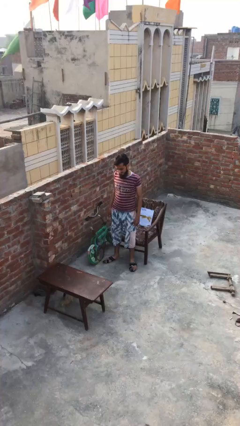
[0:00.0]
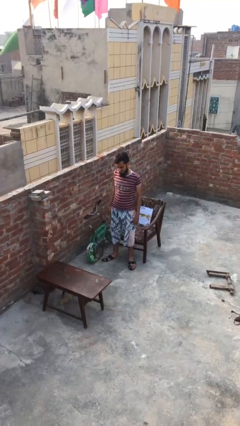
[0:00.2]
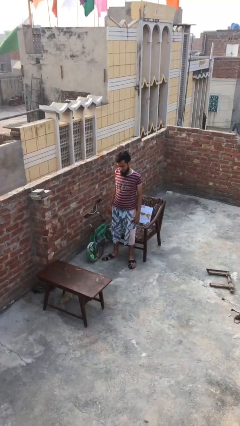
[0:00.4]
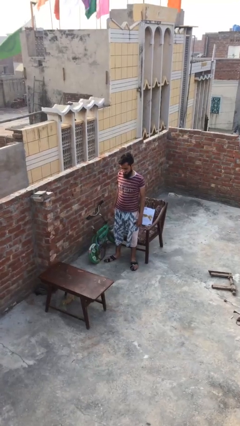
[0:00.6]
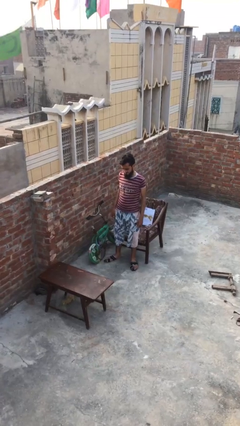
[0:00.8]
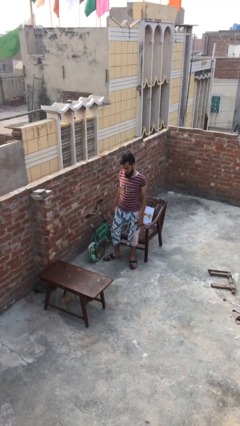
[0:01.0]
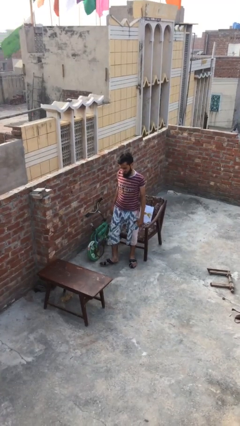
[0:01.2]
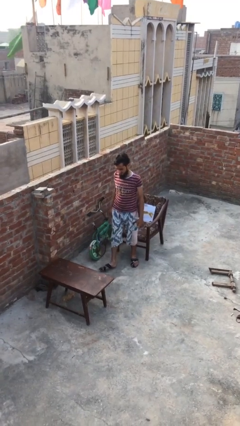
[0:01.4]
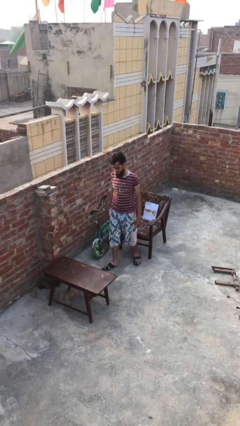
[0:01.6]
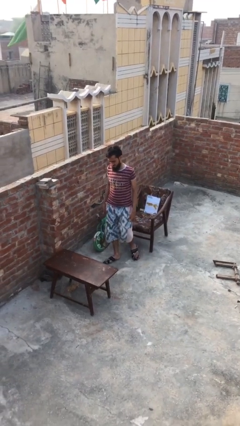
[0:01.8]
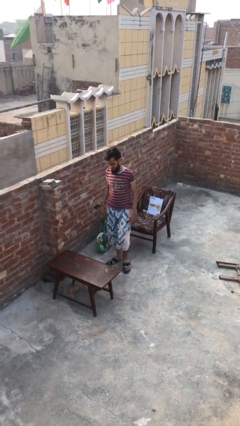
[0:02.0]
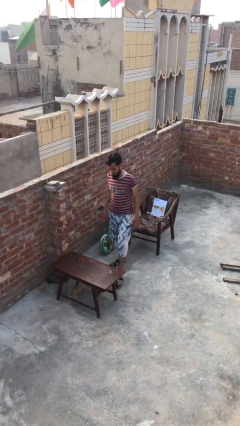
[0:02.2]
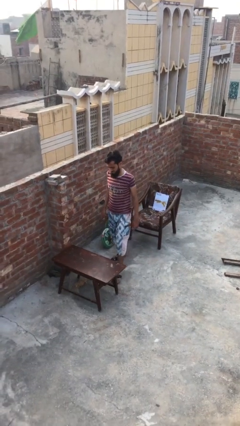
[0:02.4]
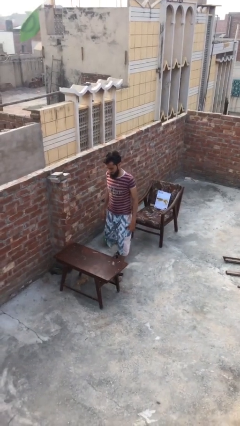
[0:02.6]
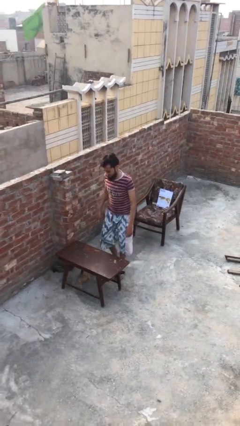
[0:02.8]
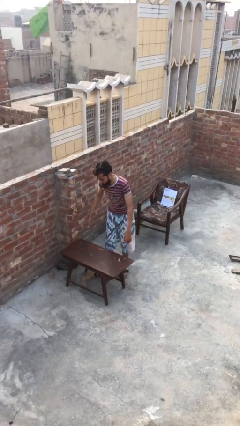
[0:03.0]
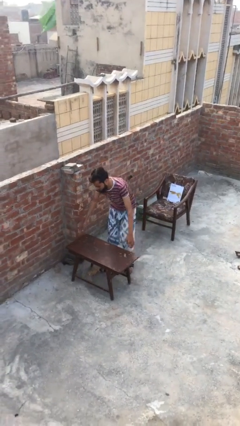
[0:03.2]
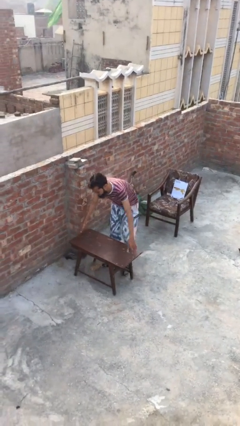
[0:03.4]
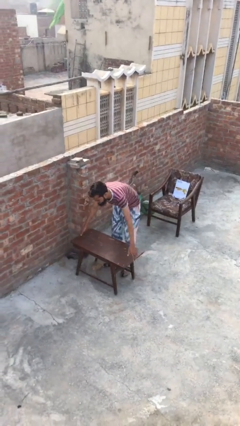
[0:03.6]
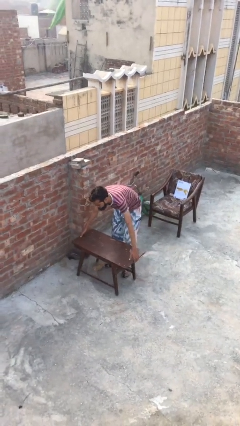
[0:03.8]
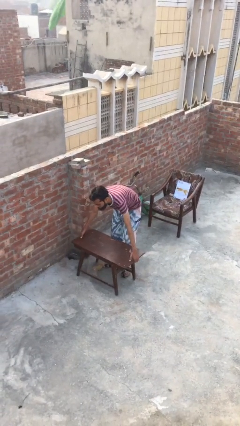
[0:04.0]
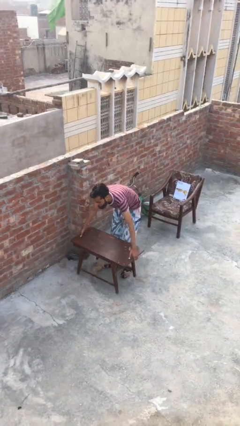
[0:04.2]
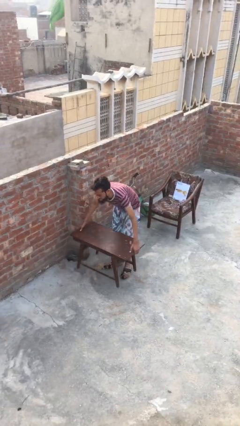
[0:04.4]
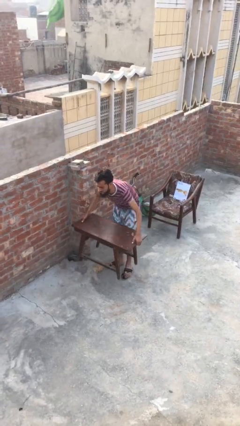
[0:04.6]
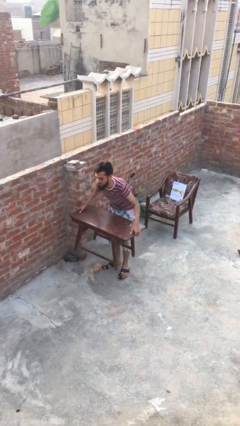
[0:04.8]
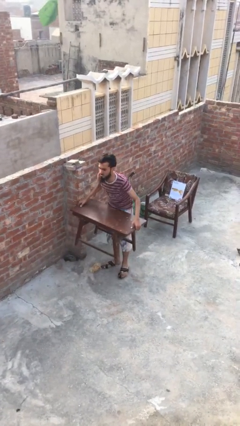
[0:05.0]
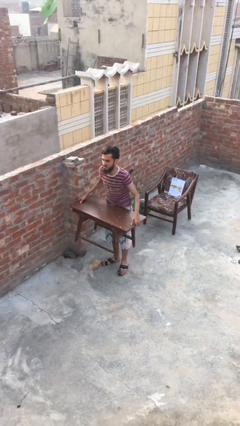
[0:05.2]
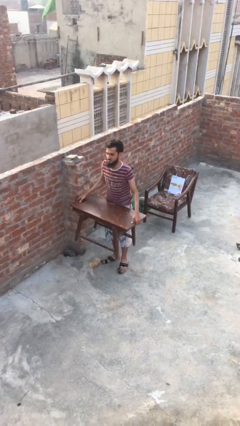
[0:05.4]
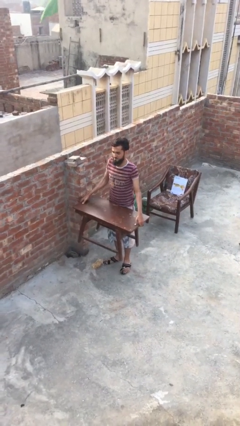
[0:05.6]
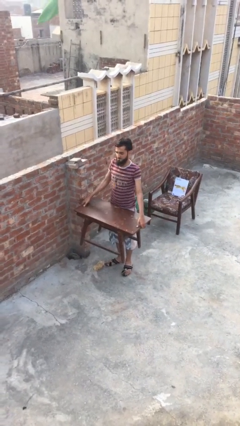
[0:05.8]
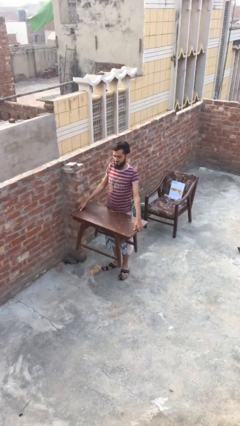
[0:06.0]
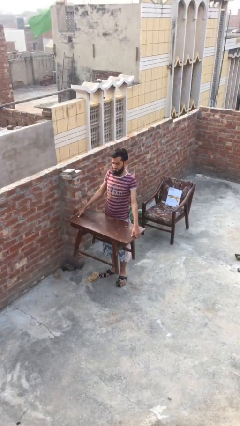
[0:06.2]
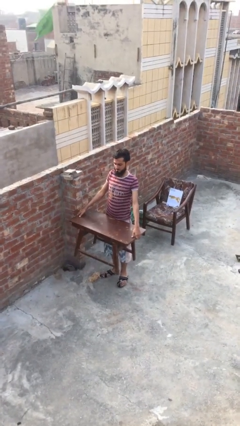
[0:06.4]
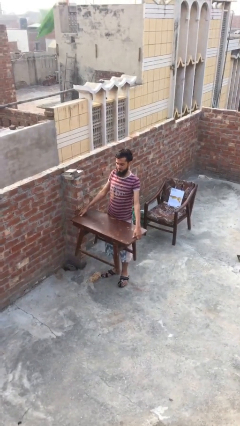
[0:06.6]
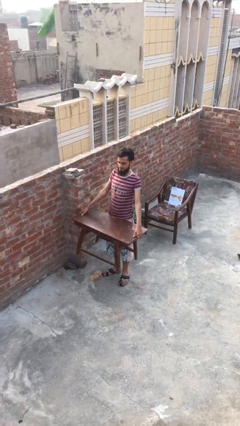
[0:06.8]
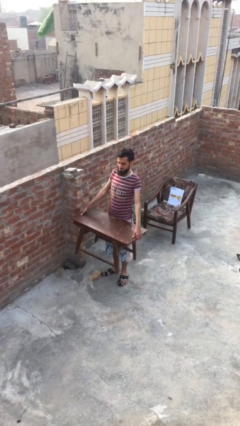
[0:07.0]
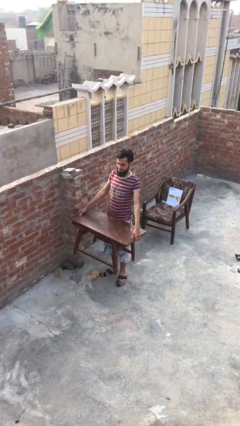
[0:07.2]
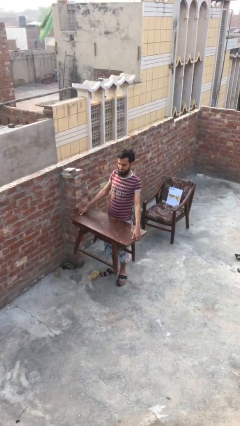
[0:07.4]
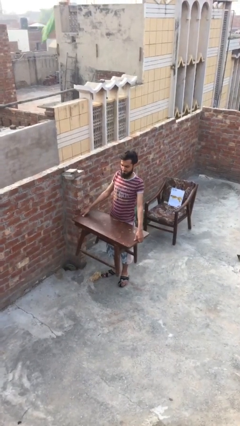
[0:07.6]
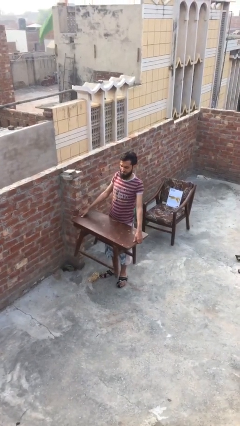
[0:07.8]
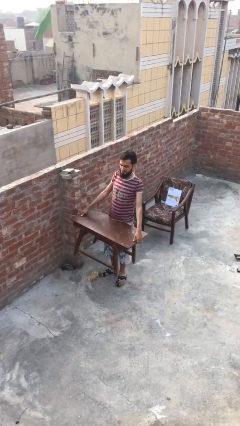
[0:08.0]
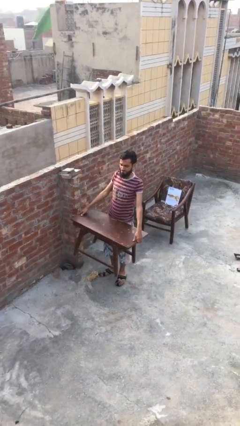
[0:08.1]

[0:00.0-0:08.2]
person picks up object from floor

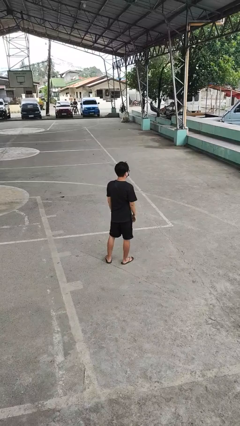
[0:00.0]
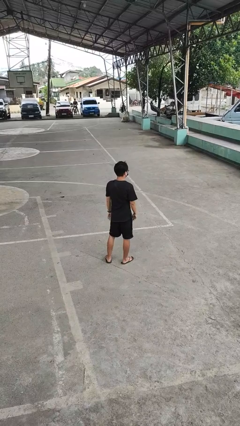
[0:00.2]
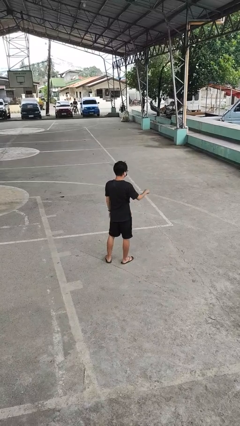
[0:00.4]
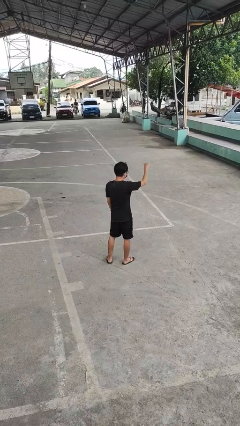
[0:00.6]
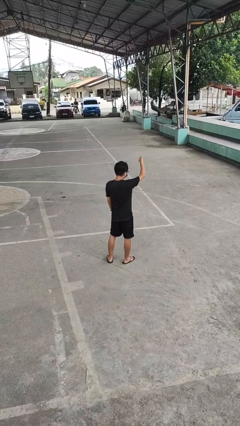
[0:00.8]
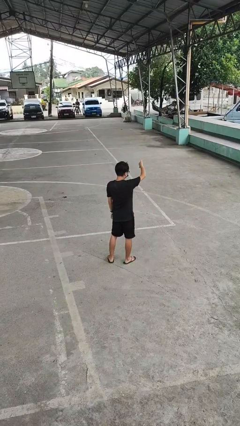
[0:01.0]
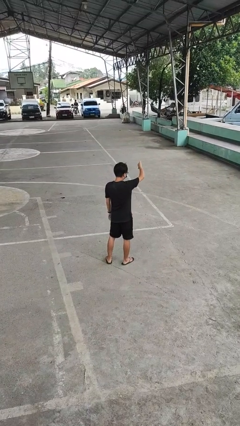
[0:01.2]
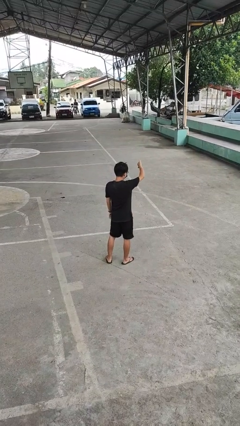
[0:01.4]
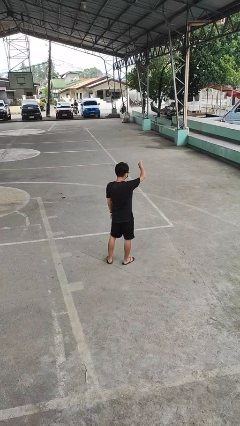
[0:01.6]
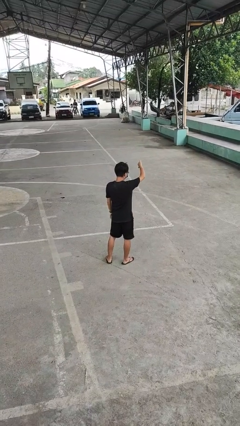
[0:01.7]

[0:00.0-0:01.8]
person gestures thumbs down

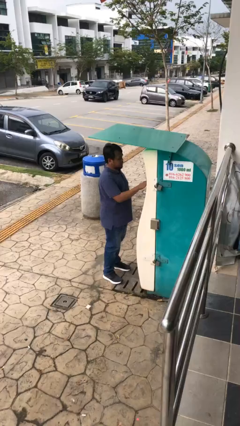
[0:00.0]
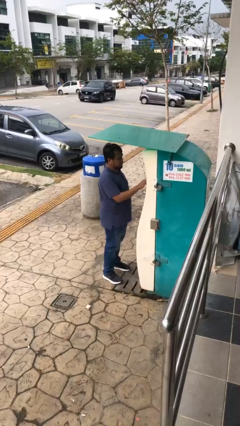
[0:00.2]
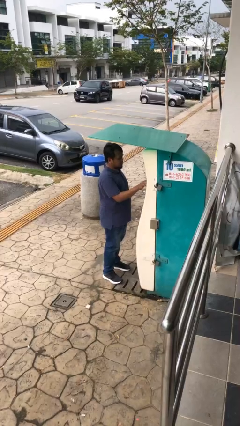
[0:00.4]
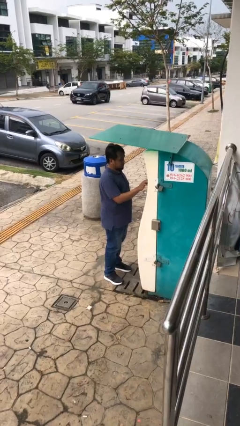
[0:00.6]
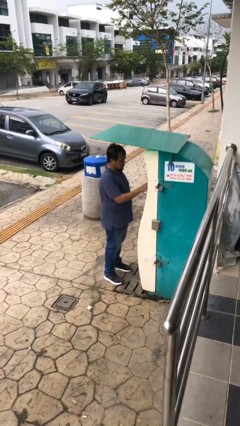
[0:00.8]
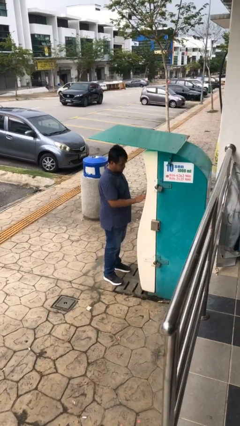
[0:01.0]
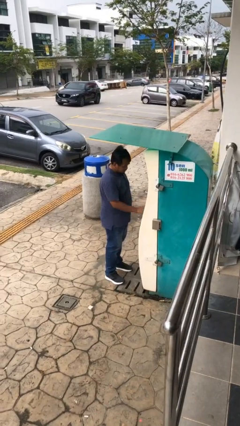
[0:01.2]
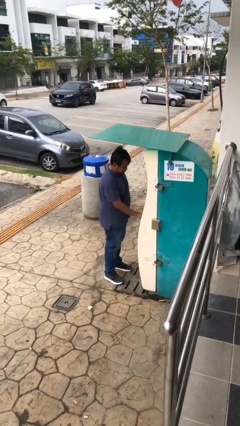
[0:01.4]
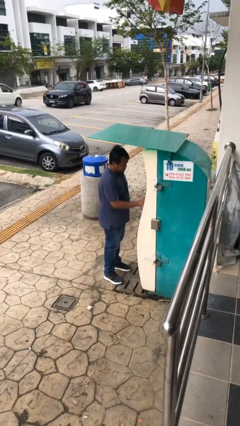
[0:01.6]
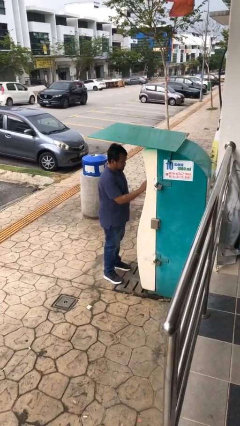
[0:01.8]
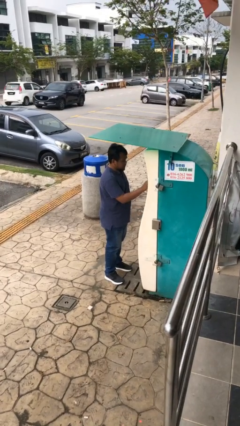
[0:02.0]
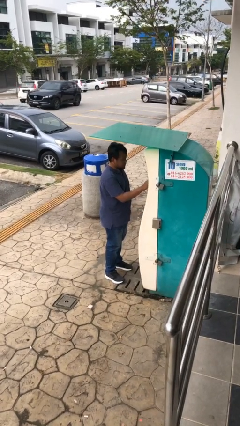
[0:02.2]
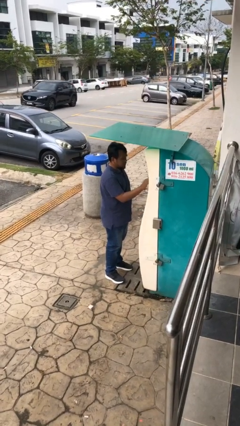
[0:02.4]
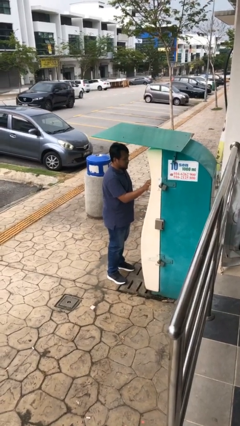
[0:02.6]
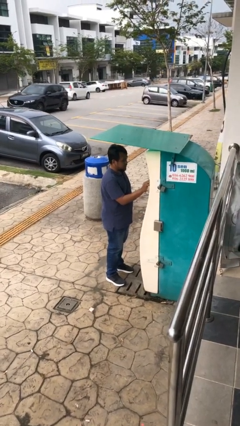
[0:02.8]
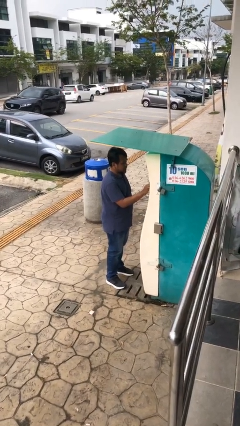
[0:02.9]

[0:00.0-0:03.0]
person purchases from machine

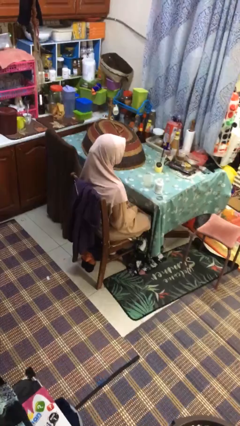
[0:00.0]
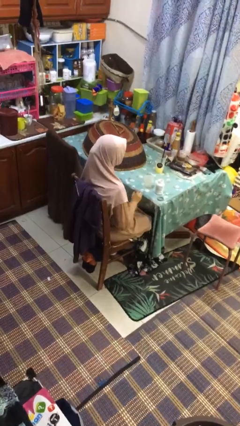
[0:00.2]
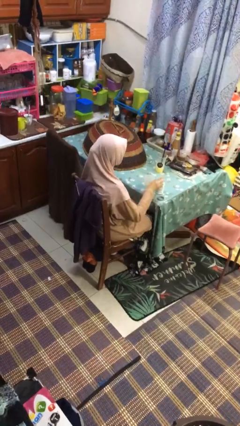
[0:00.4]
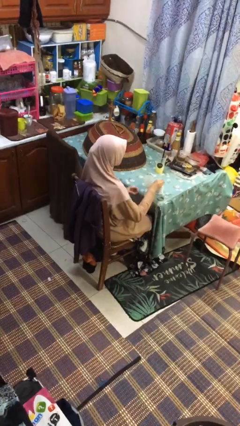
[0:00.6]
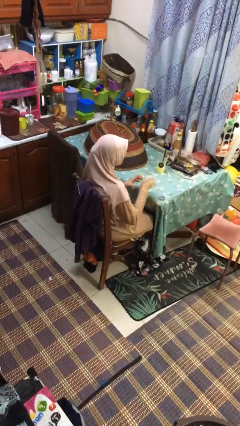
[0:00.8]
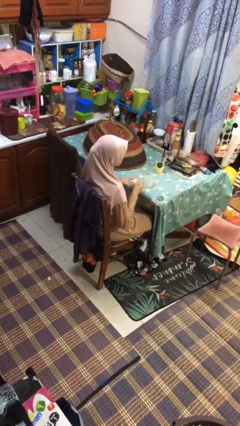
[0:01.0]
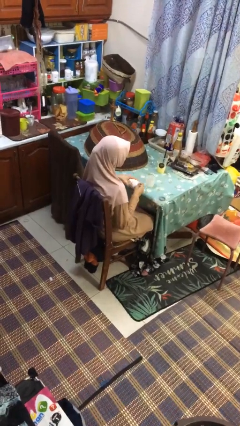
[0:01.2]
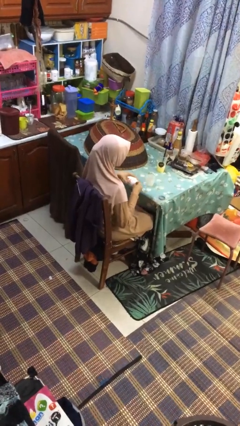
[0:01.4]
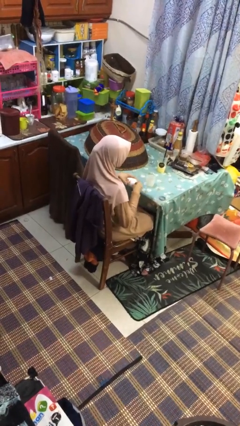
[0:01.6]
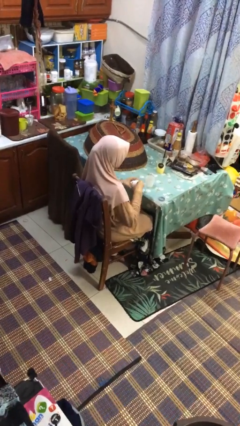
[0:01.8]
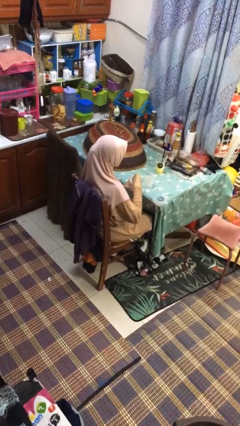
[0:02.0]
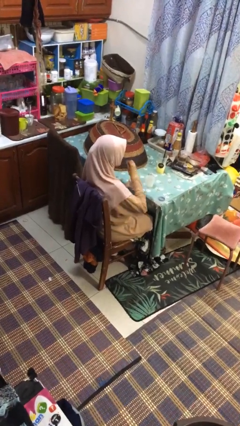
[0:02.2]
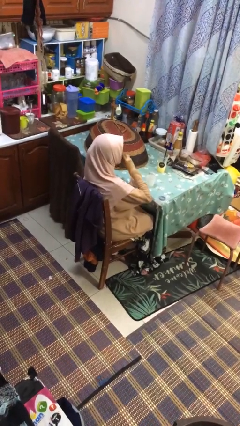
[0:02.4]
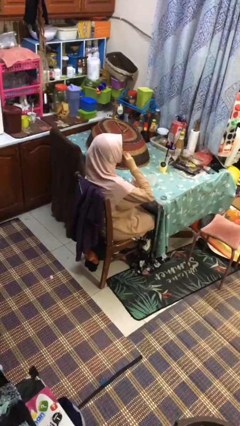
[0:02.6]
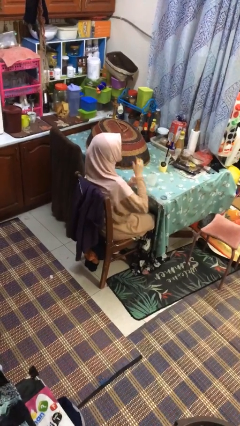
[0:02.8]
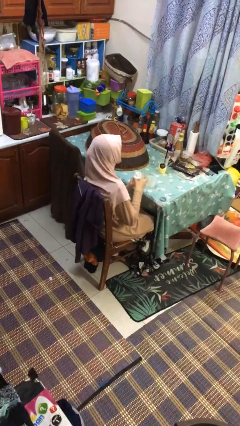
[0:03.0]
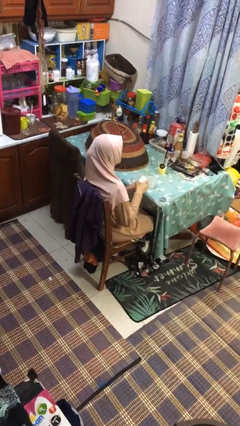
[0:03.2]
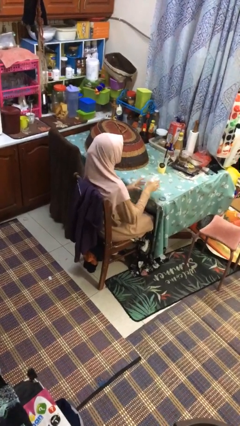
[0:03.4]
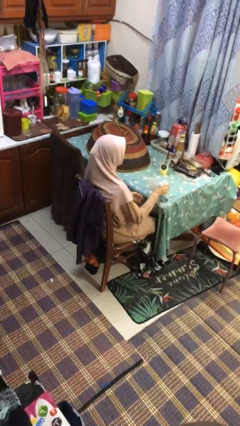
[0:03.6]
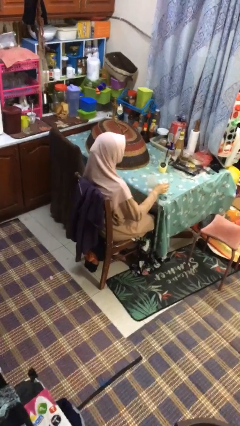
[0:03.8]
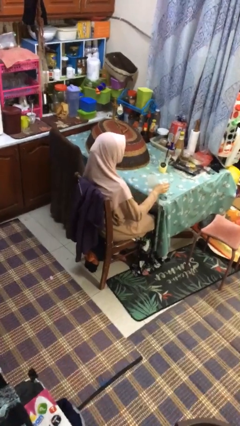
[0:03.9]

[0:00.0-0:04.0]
person takes medicine pills

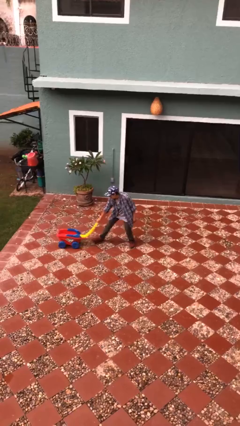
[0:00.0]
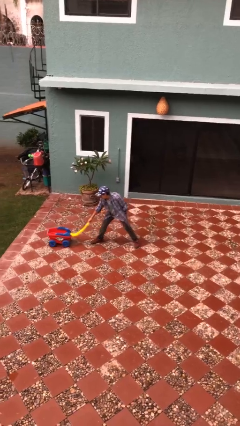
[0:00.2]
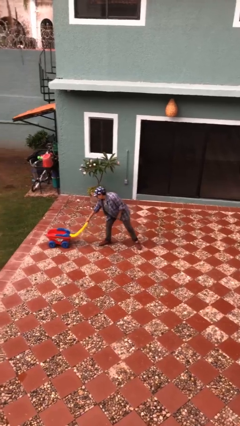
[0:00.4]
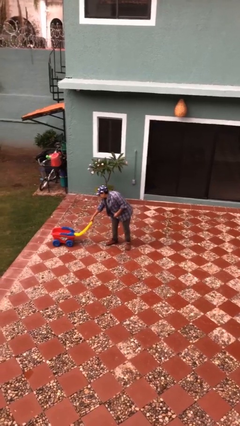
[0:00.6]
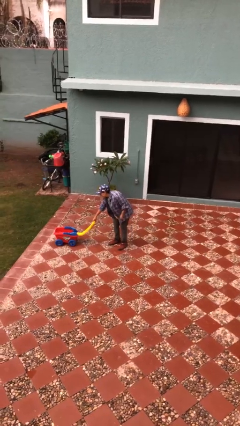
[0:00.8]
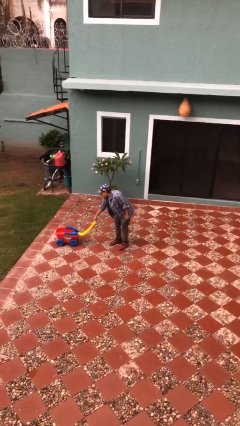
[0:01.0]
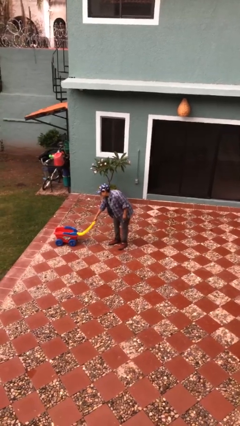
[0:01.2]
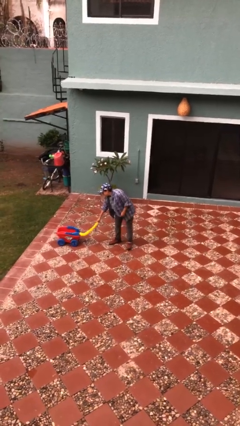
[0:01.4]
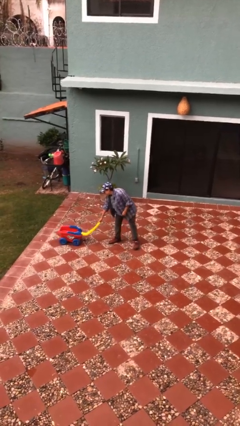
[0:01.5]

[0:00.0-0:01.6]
person pushes wheeled cart
